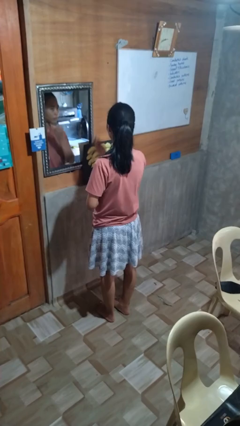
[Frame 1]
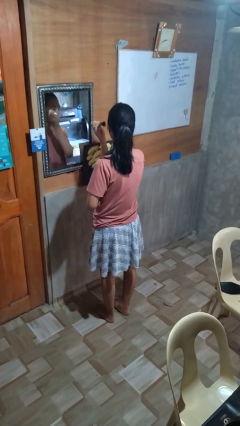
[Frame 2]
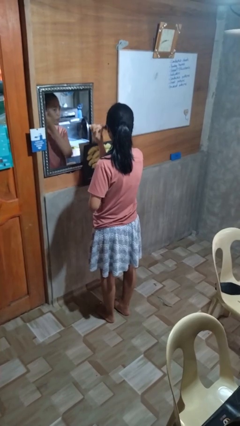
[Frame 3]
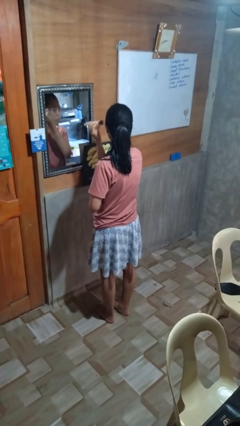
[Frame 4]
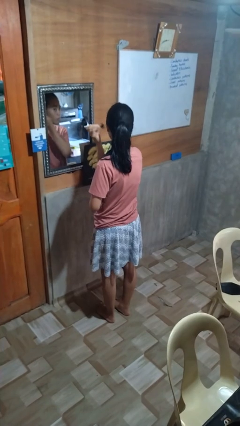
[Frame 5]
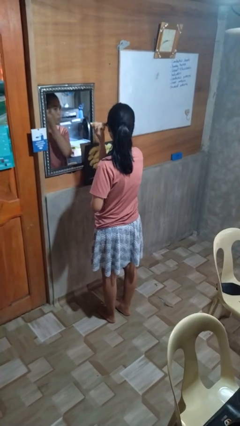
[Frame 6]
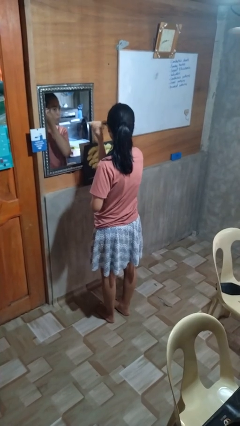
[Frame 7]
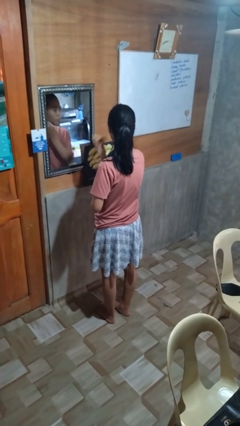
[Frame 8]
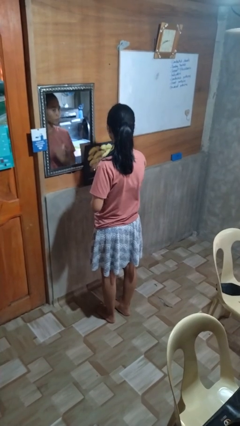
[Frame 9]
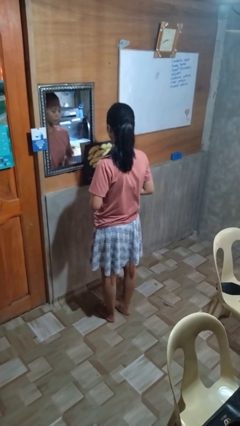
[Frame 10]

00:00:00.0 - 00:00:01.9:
person applies foundation makeup

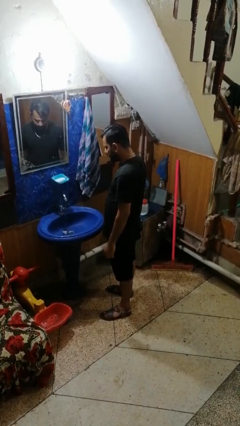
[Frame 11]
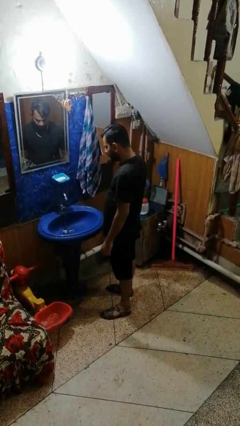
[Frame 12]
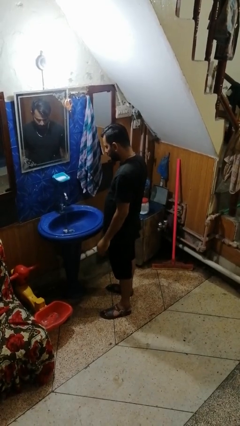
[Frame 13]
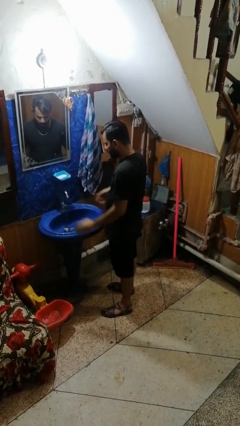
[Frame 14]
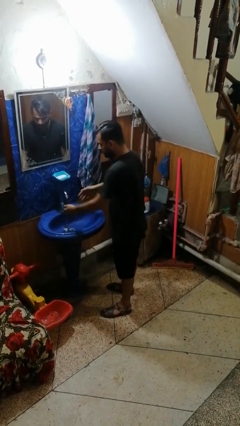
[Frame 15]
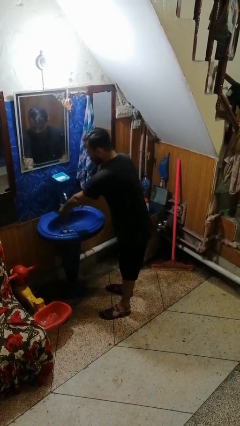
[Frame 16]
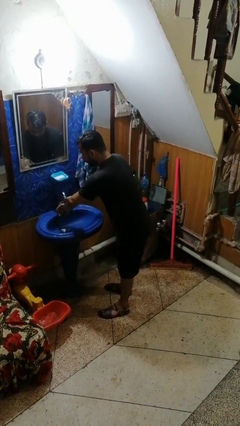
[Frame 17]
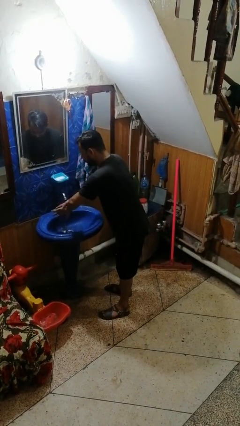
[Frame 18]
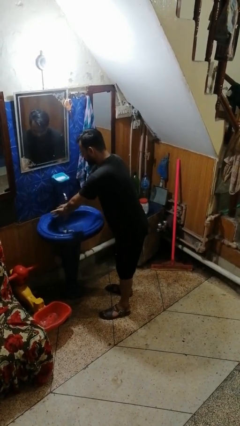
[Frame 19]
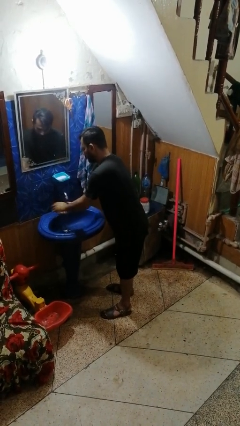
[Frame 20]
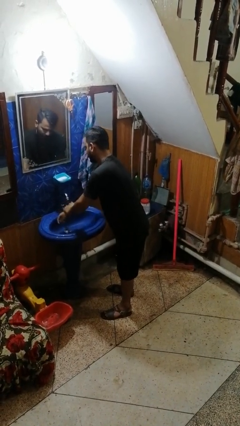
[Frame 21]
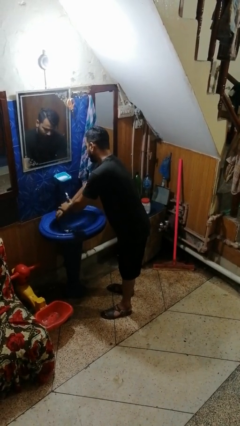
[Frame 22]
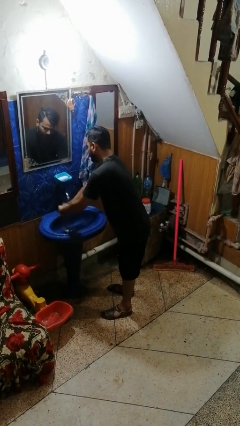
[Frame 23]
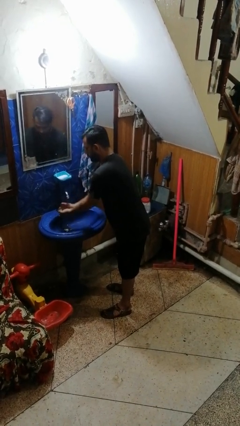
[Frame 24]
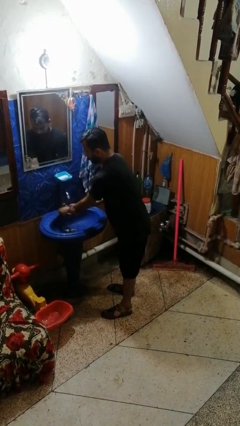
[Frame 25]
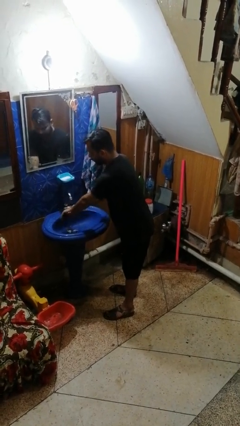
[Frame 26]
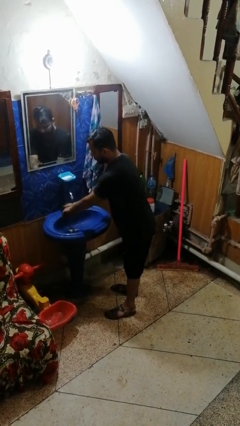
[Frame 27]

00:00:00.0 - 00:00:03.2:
person washes hands

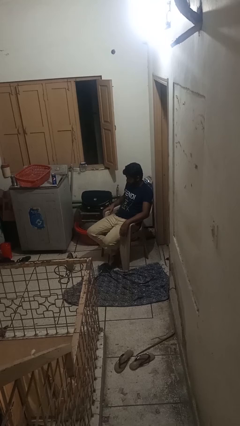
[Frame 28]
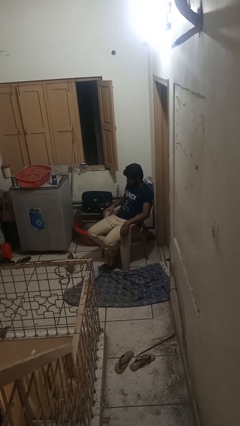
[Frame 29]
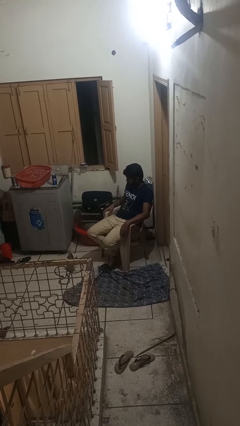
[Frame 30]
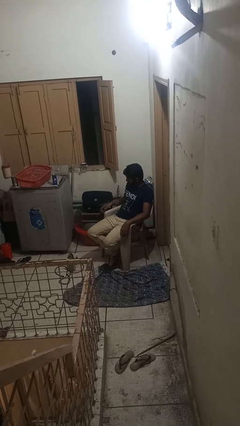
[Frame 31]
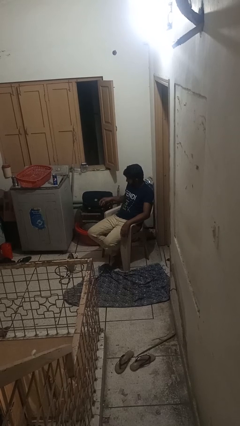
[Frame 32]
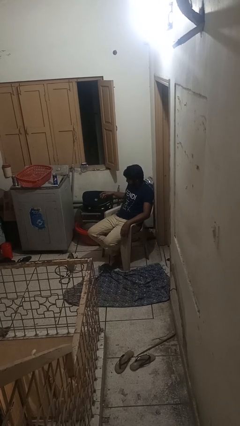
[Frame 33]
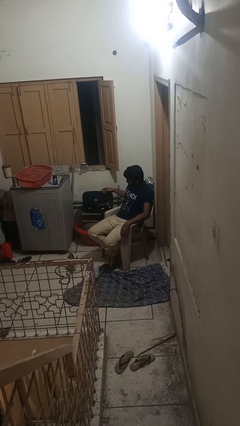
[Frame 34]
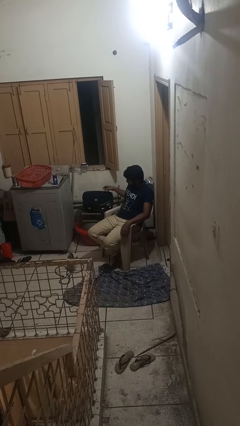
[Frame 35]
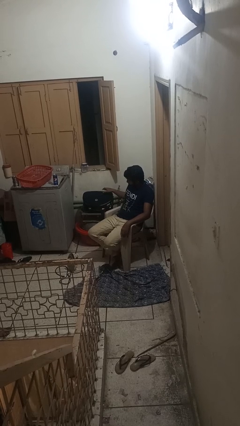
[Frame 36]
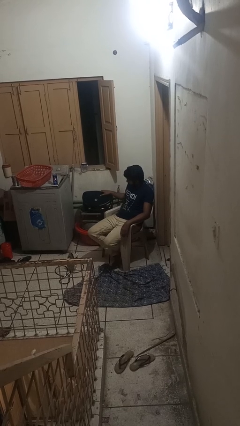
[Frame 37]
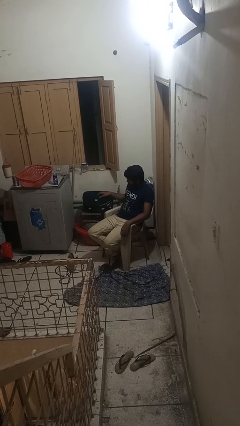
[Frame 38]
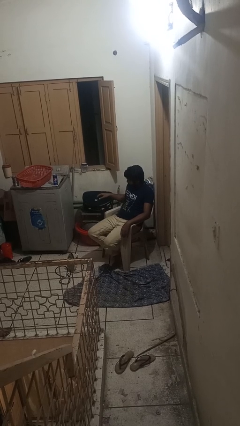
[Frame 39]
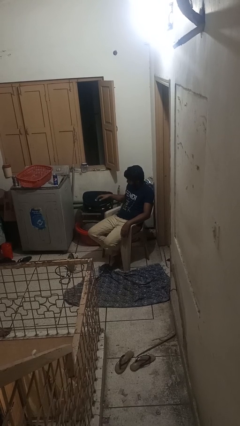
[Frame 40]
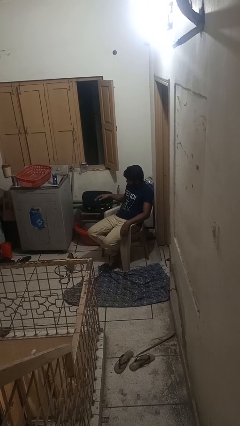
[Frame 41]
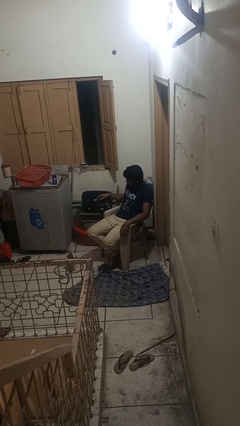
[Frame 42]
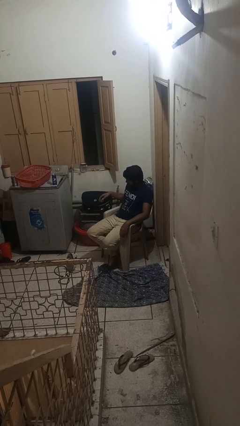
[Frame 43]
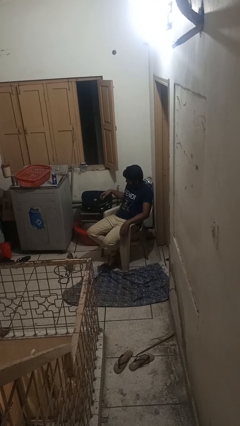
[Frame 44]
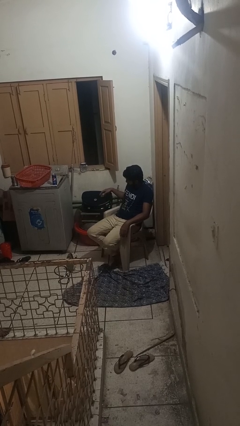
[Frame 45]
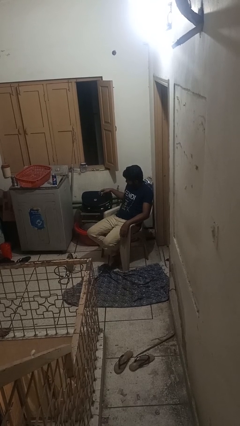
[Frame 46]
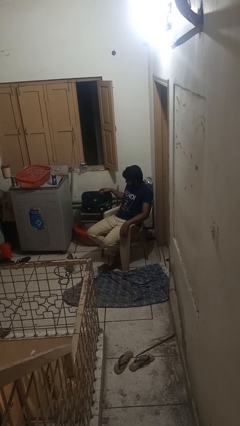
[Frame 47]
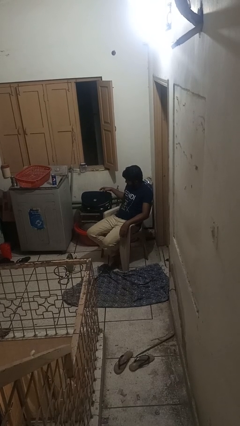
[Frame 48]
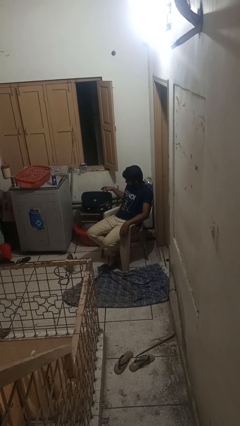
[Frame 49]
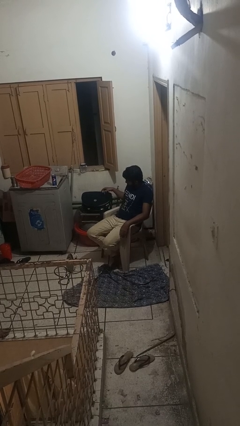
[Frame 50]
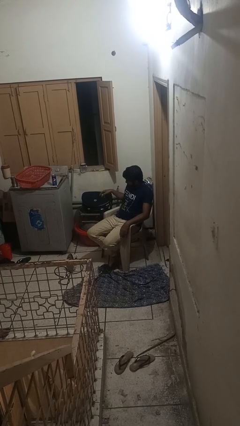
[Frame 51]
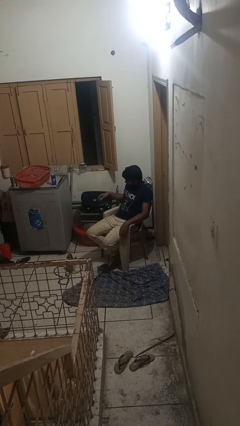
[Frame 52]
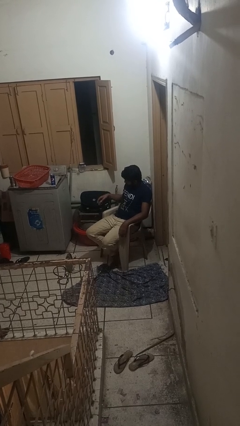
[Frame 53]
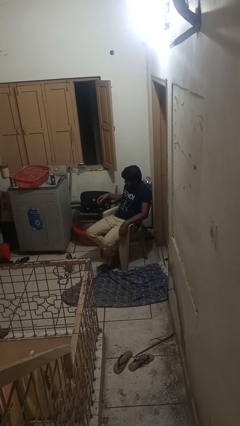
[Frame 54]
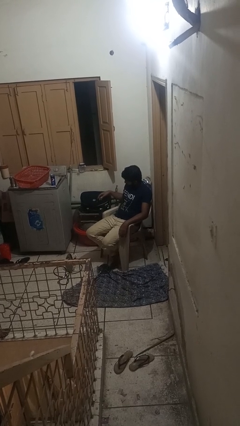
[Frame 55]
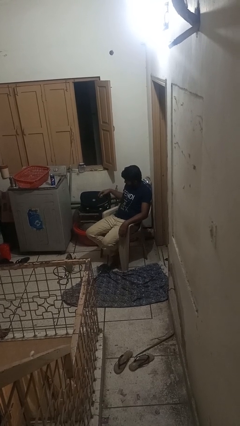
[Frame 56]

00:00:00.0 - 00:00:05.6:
person waves hand over object

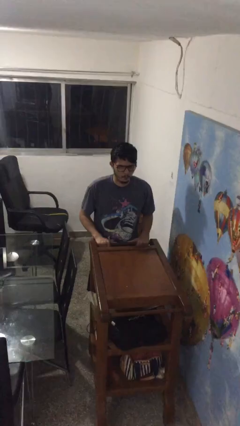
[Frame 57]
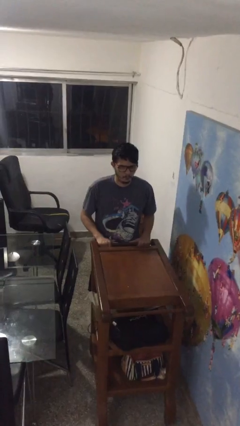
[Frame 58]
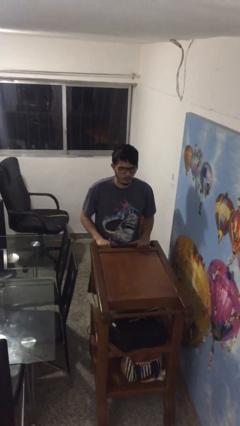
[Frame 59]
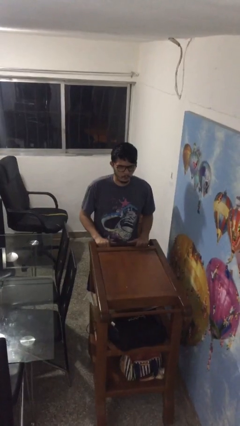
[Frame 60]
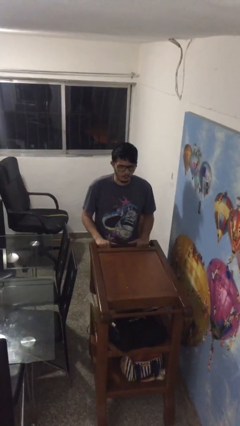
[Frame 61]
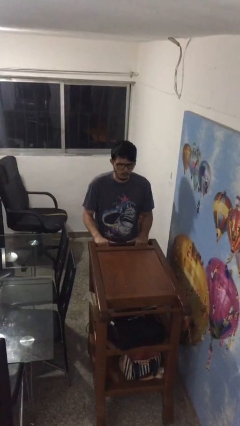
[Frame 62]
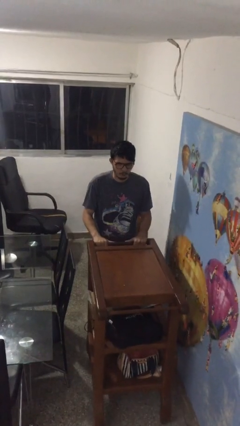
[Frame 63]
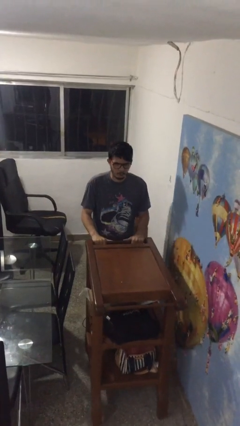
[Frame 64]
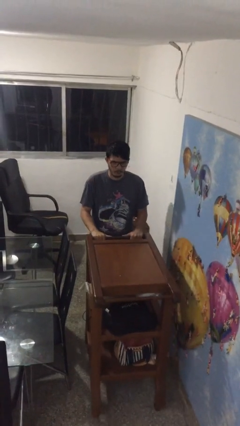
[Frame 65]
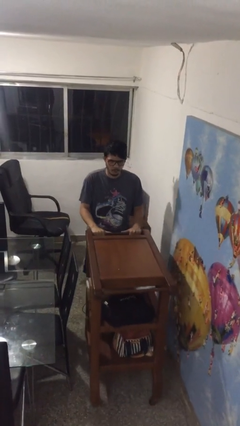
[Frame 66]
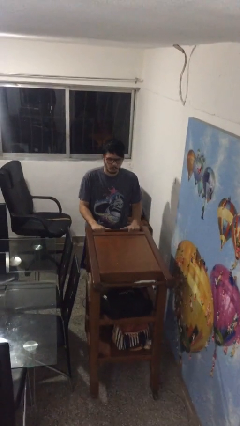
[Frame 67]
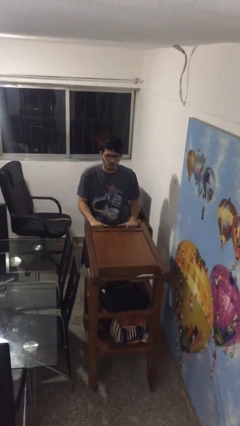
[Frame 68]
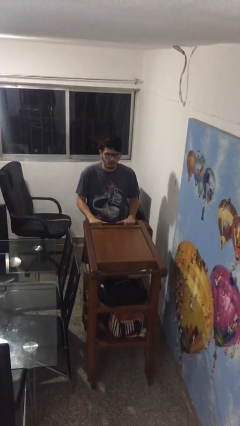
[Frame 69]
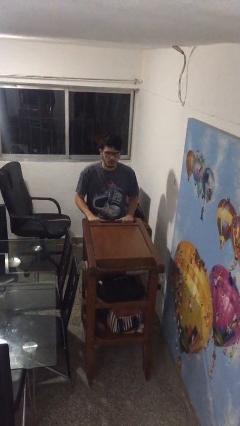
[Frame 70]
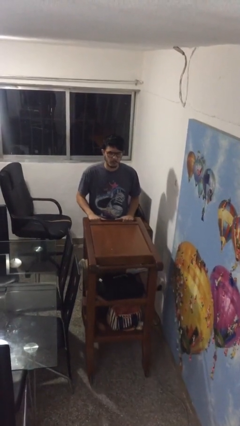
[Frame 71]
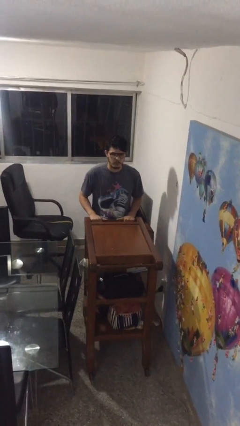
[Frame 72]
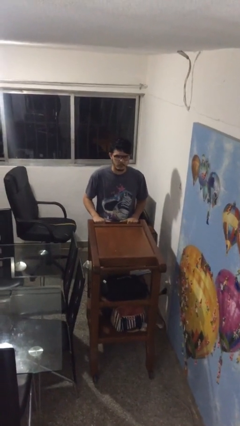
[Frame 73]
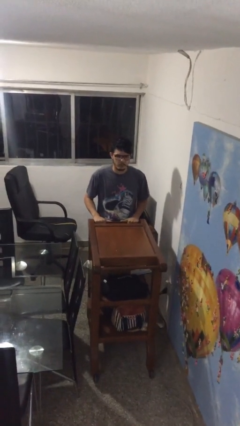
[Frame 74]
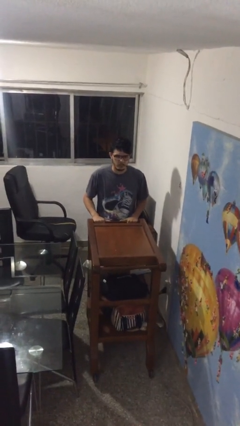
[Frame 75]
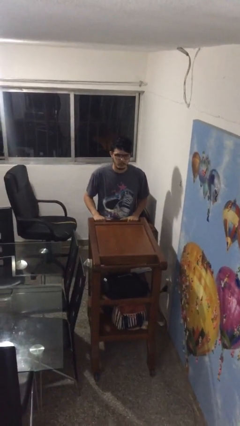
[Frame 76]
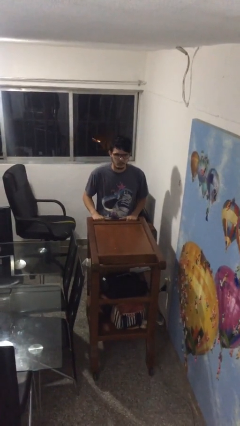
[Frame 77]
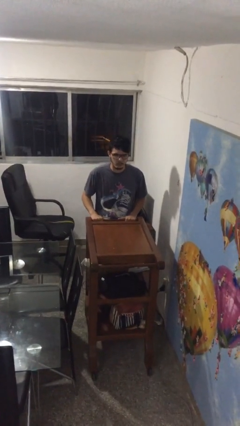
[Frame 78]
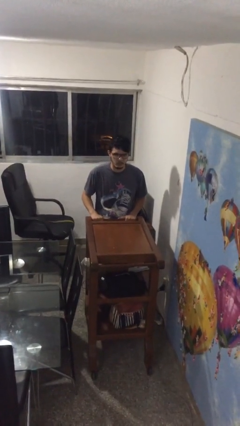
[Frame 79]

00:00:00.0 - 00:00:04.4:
person pulls wheeled cart

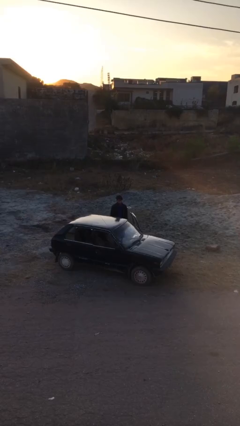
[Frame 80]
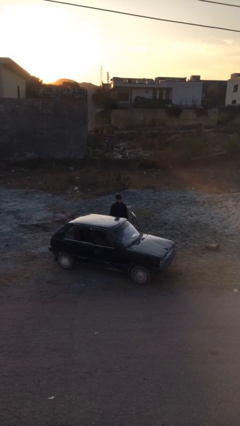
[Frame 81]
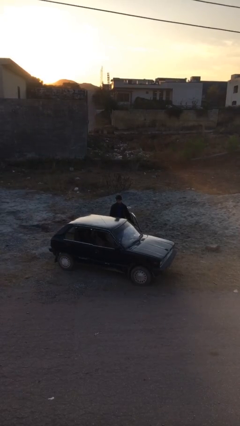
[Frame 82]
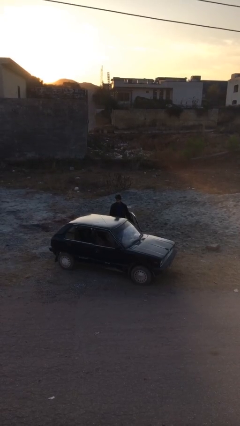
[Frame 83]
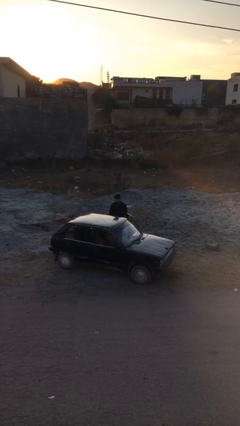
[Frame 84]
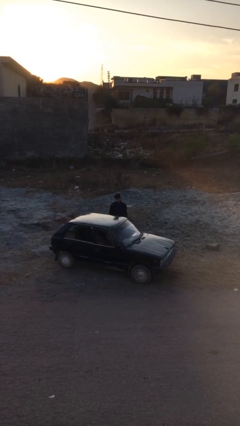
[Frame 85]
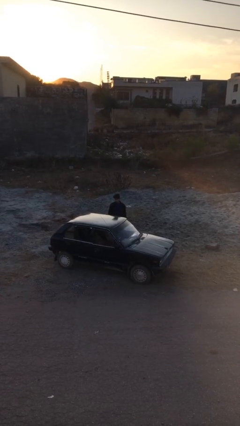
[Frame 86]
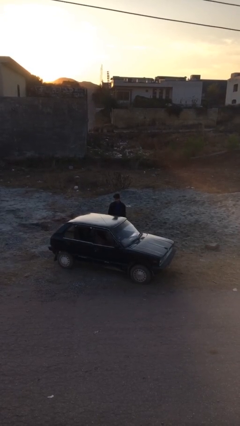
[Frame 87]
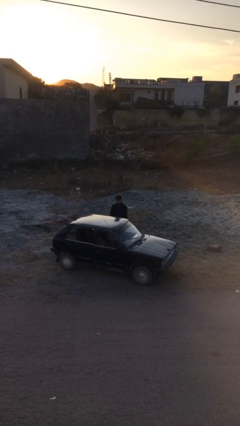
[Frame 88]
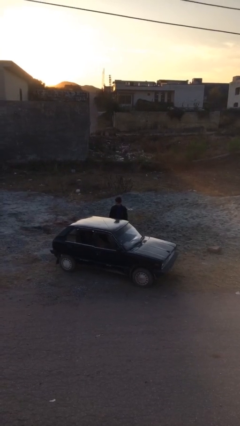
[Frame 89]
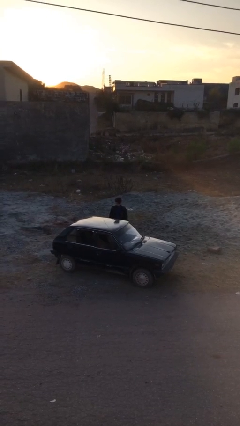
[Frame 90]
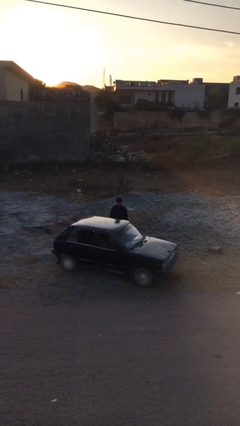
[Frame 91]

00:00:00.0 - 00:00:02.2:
person closes car door

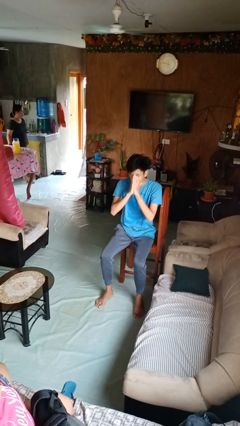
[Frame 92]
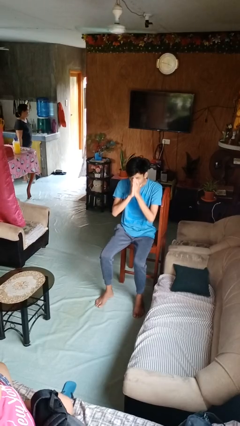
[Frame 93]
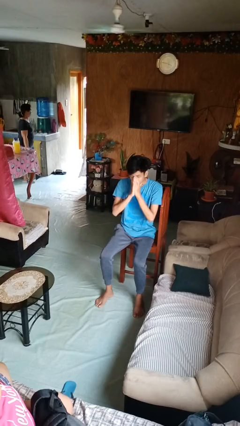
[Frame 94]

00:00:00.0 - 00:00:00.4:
person sneezes into hand
